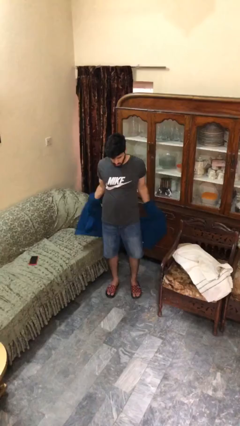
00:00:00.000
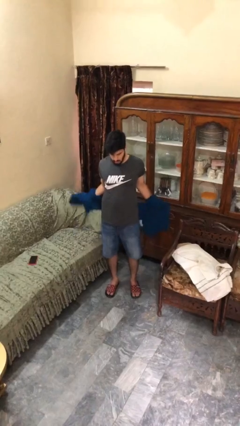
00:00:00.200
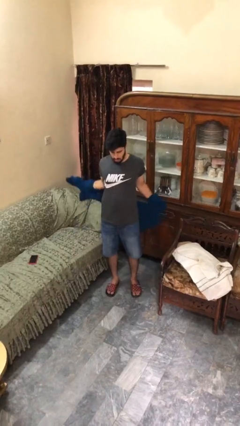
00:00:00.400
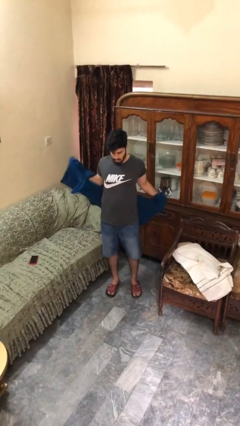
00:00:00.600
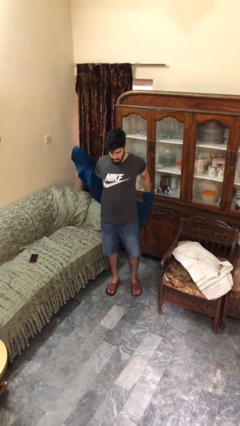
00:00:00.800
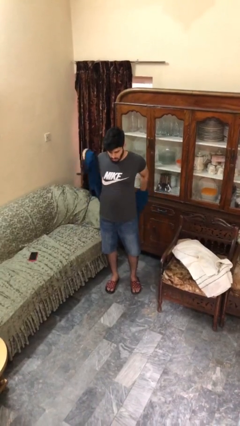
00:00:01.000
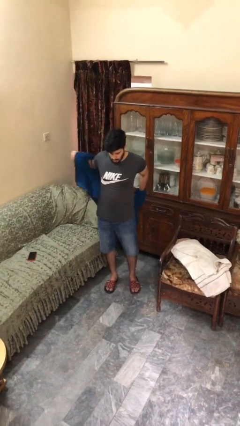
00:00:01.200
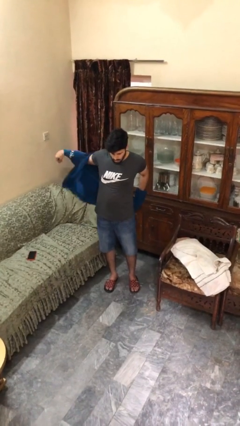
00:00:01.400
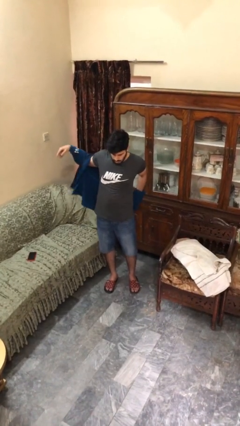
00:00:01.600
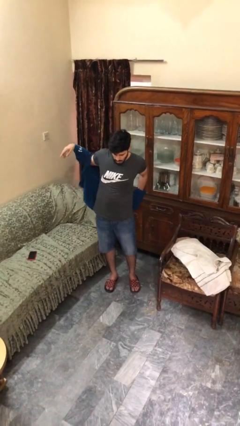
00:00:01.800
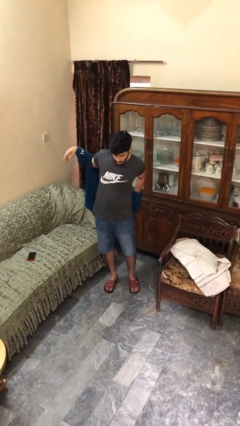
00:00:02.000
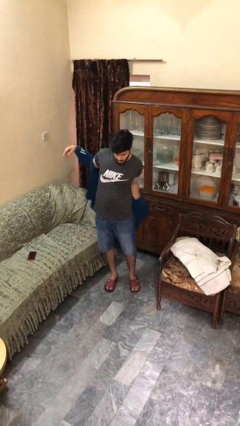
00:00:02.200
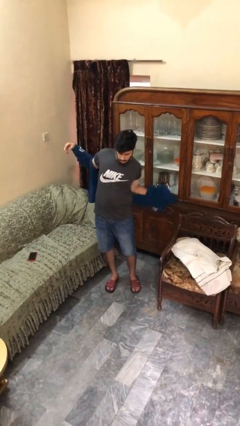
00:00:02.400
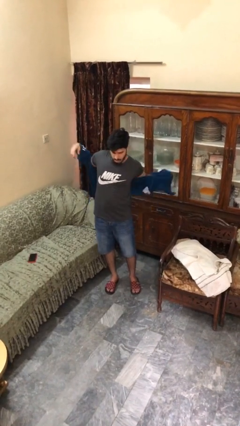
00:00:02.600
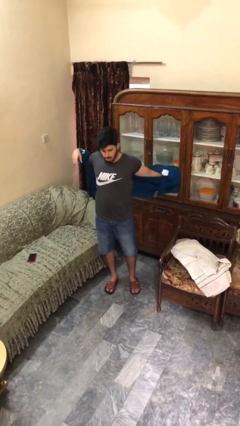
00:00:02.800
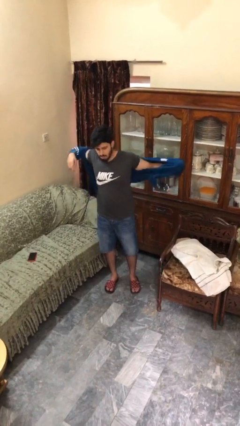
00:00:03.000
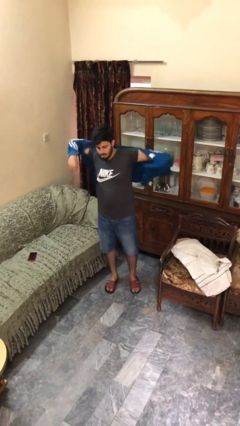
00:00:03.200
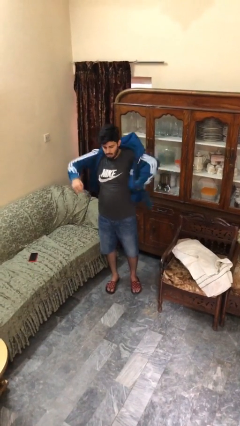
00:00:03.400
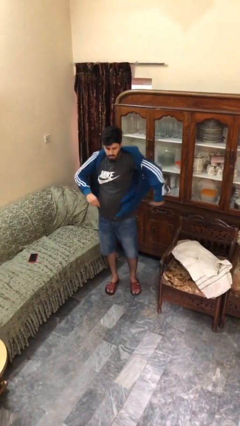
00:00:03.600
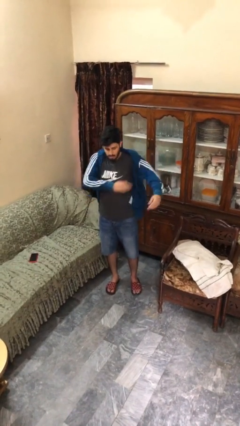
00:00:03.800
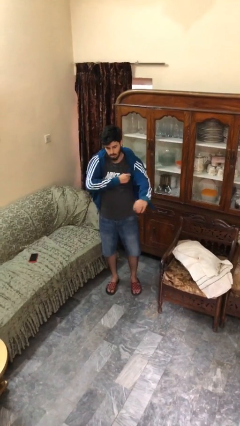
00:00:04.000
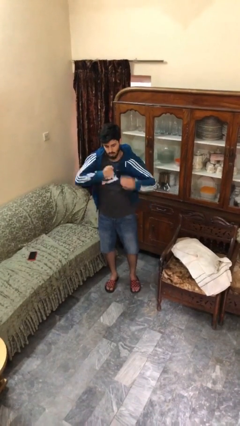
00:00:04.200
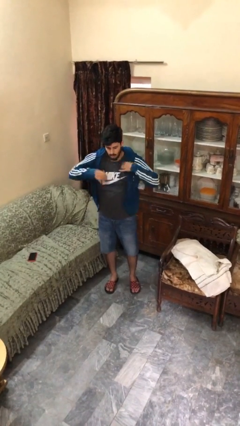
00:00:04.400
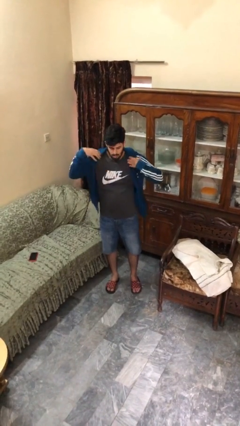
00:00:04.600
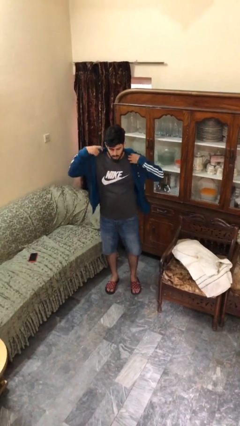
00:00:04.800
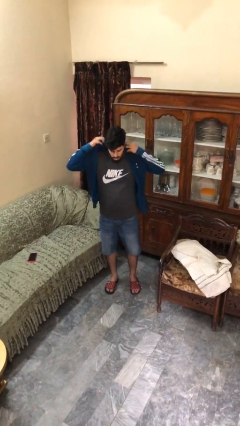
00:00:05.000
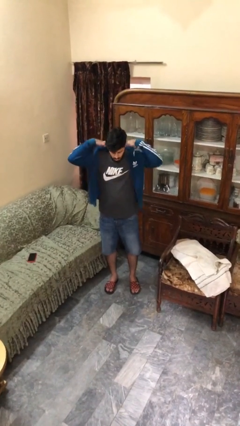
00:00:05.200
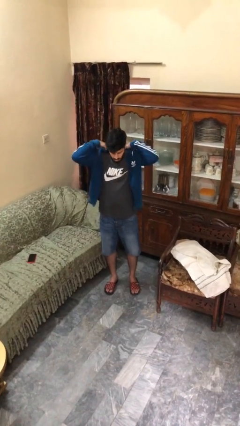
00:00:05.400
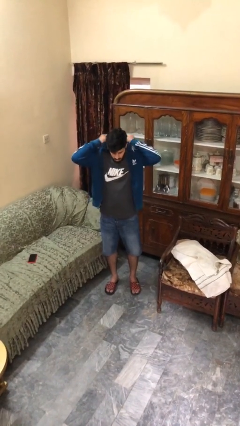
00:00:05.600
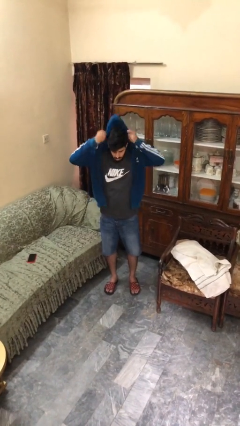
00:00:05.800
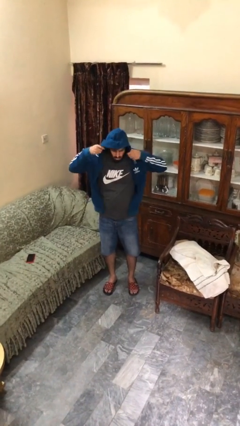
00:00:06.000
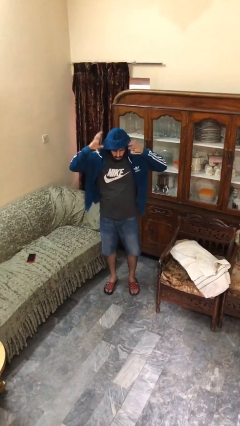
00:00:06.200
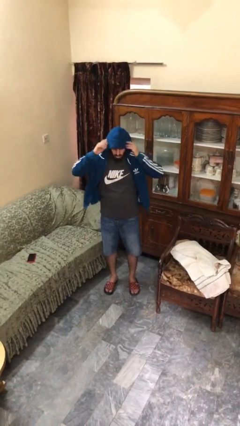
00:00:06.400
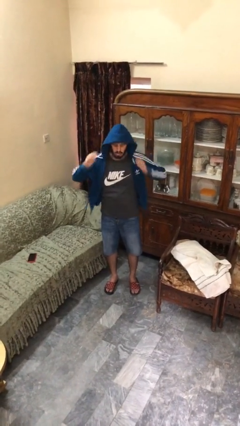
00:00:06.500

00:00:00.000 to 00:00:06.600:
person puts on hoodie

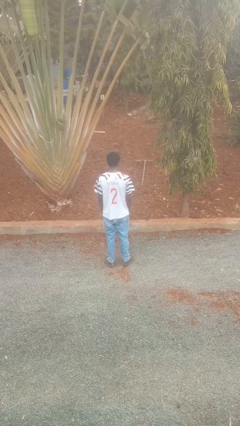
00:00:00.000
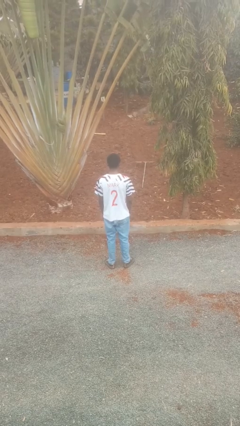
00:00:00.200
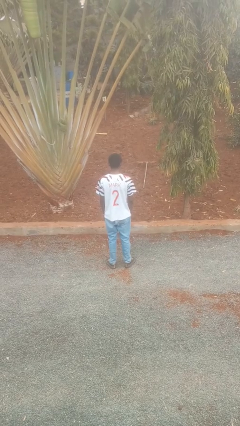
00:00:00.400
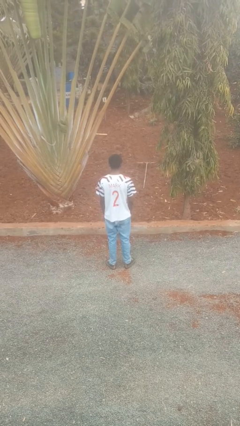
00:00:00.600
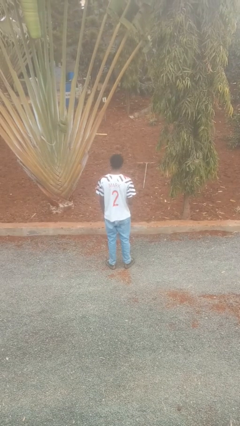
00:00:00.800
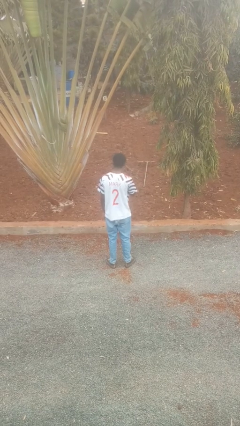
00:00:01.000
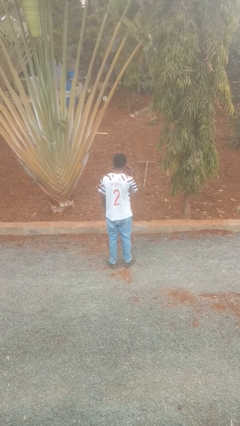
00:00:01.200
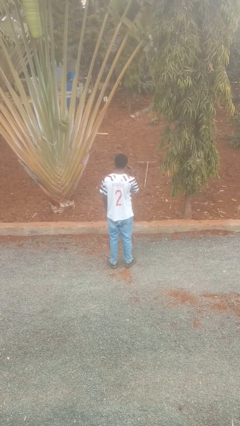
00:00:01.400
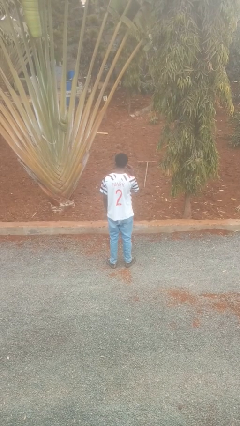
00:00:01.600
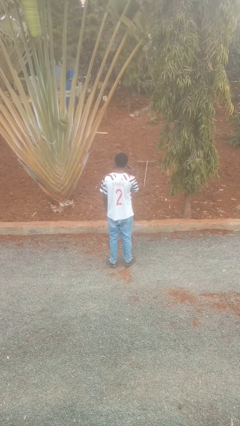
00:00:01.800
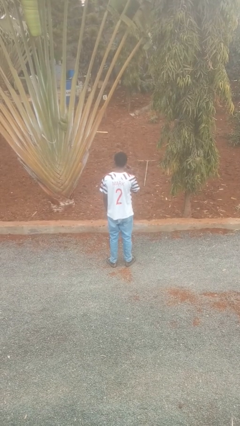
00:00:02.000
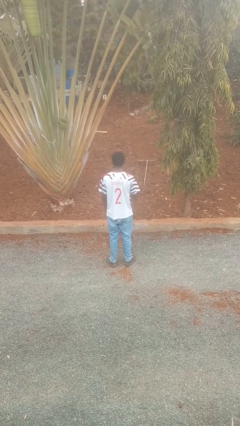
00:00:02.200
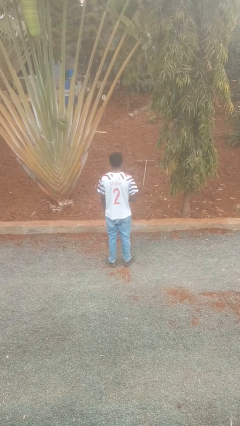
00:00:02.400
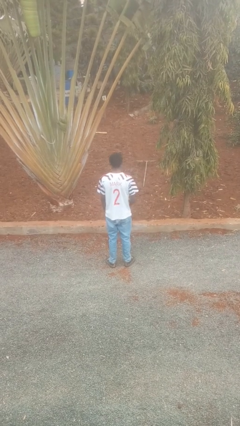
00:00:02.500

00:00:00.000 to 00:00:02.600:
person gestures listen closely

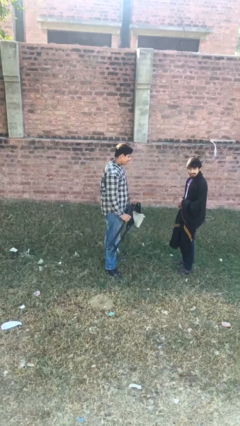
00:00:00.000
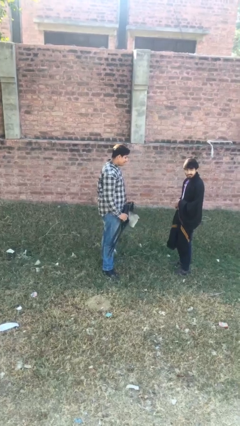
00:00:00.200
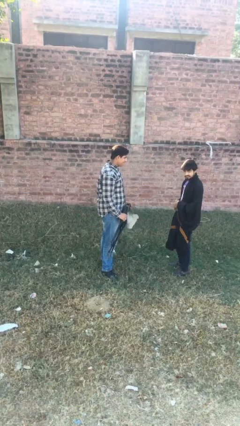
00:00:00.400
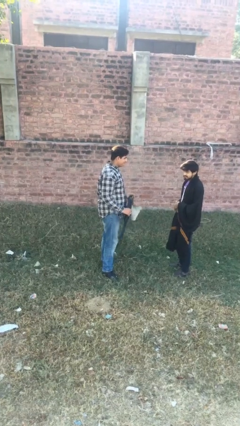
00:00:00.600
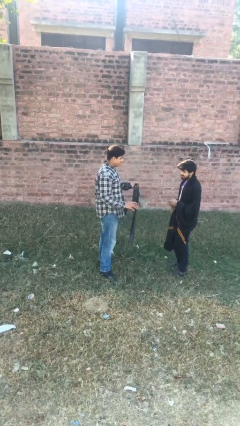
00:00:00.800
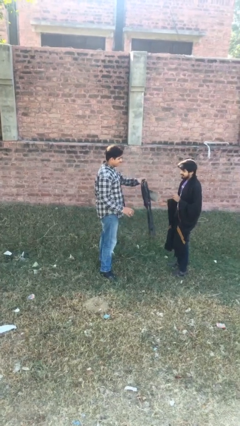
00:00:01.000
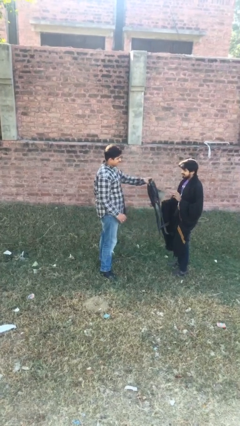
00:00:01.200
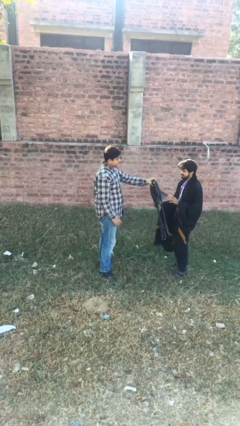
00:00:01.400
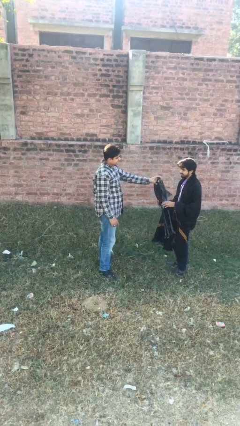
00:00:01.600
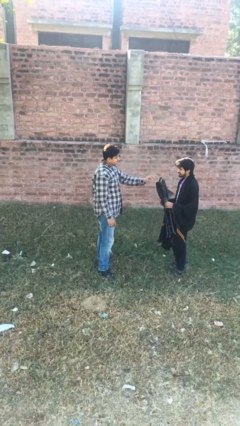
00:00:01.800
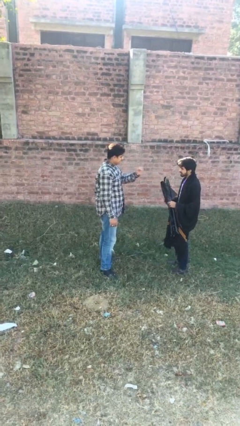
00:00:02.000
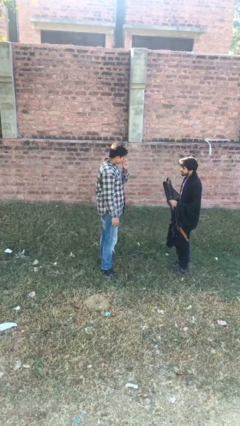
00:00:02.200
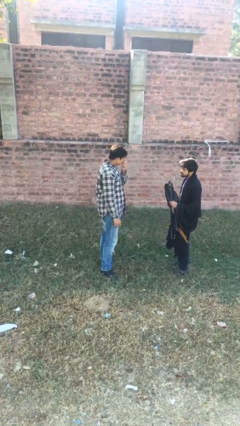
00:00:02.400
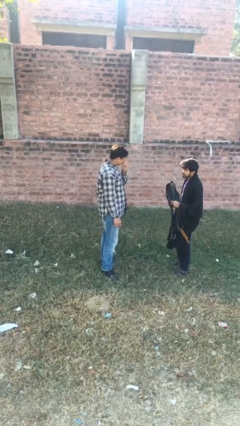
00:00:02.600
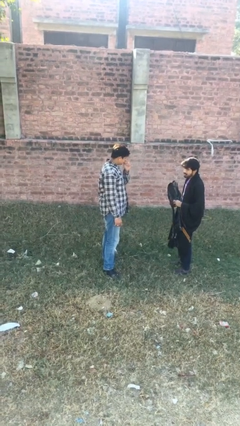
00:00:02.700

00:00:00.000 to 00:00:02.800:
person transfers object to person

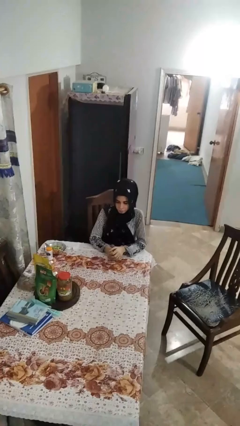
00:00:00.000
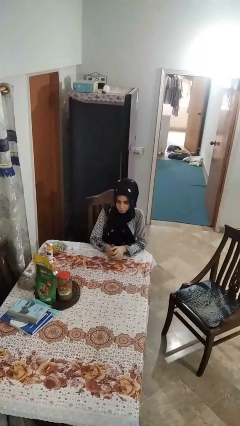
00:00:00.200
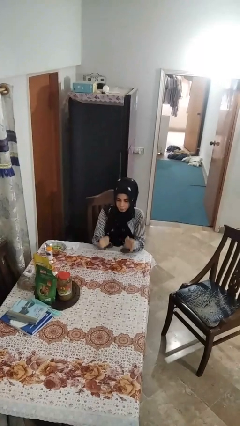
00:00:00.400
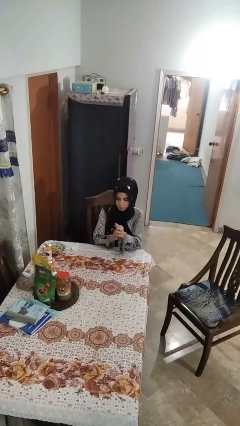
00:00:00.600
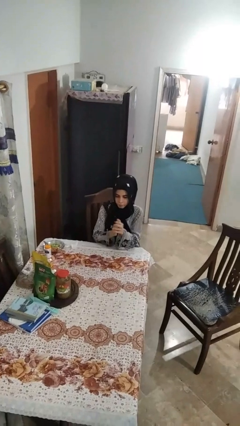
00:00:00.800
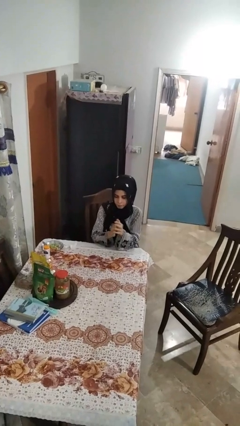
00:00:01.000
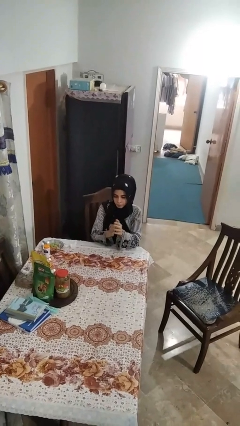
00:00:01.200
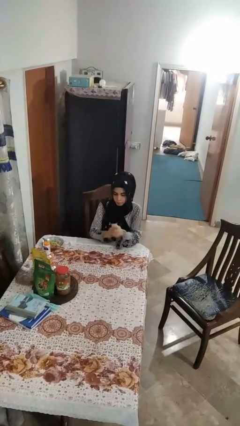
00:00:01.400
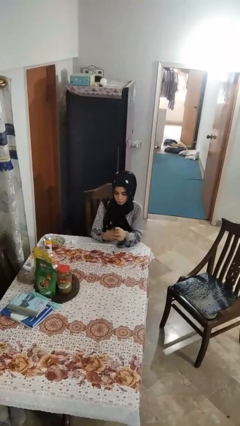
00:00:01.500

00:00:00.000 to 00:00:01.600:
person claps hands

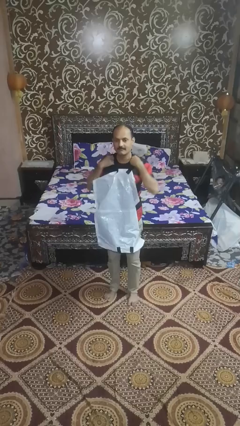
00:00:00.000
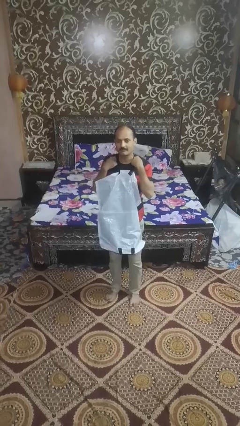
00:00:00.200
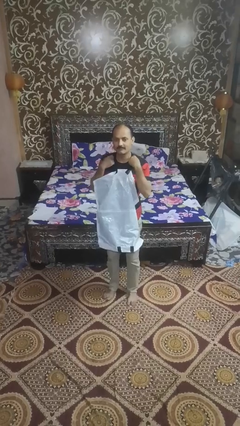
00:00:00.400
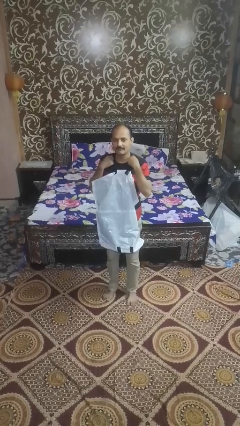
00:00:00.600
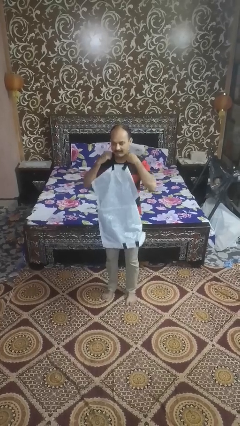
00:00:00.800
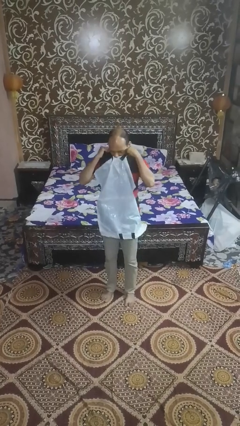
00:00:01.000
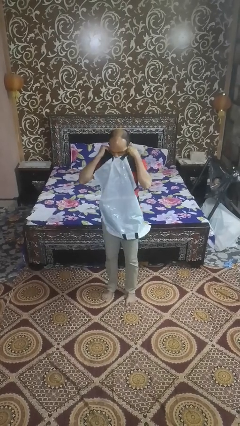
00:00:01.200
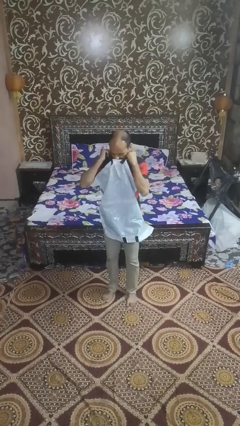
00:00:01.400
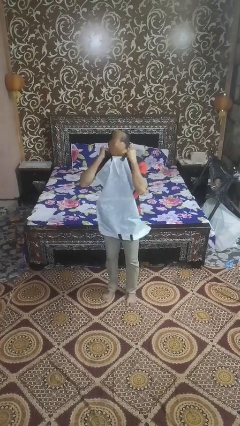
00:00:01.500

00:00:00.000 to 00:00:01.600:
person tears paper

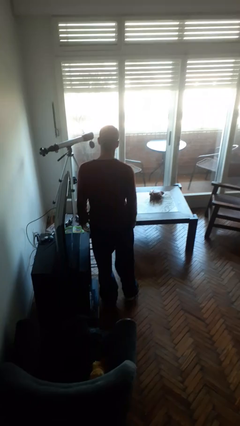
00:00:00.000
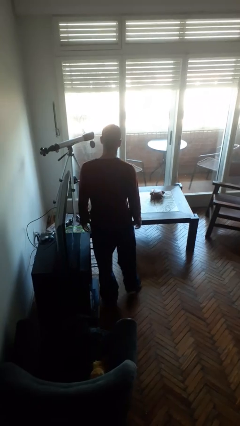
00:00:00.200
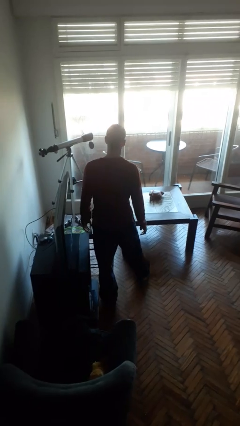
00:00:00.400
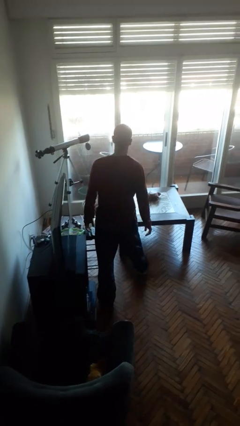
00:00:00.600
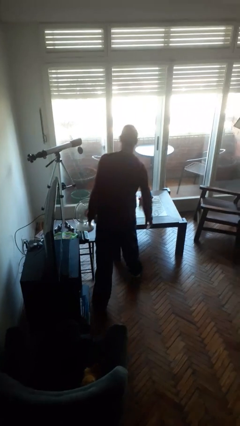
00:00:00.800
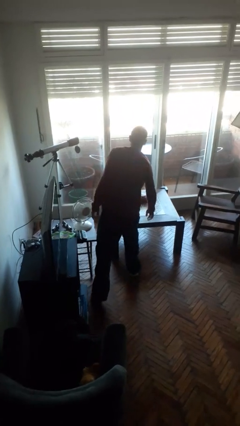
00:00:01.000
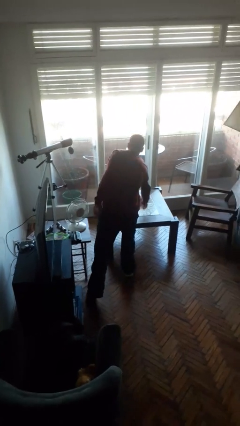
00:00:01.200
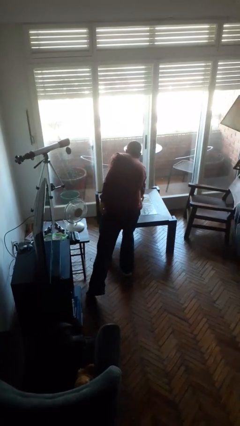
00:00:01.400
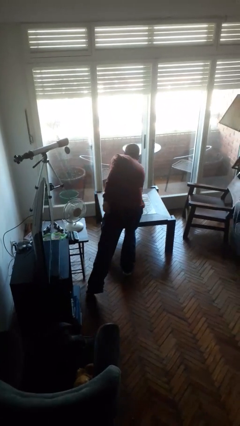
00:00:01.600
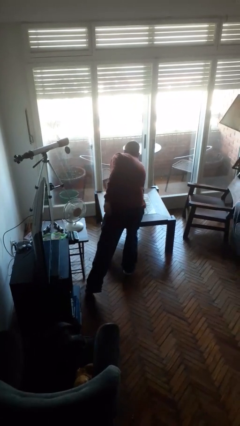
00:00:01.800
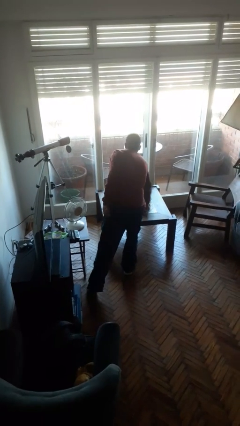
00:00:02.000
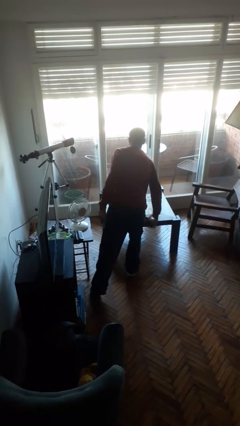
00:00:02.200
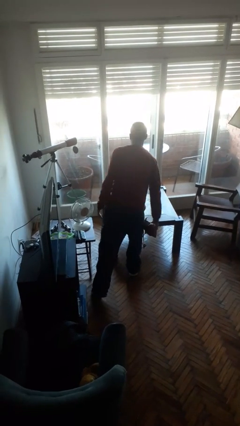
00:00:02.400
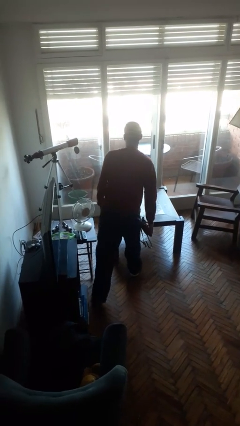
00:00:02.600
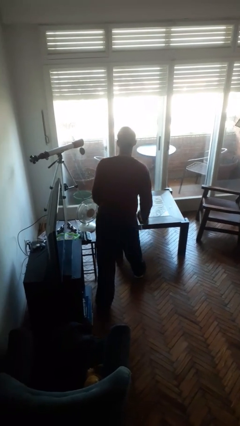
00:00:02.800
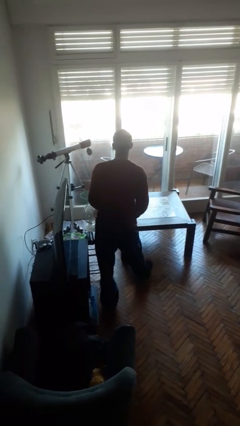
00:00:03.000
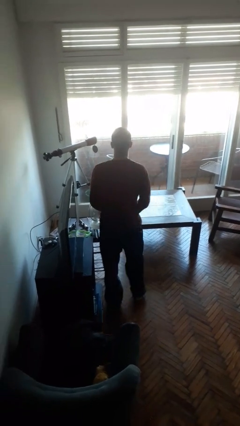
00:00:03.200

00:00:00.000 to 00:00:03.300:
person picks up object from table
